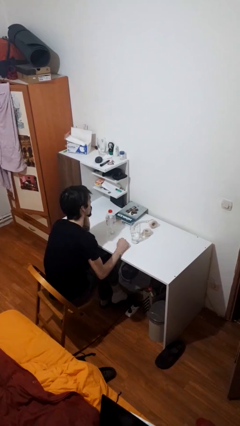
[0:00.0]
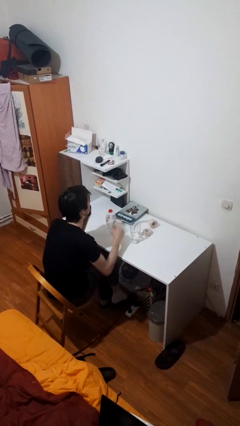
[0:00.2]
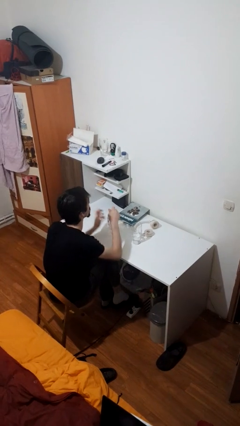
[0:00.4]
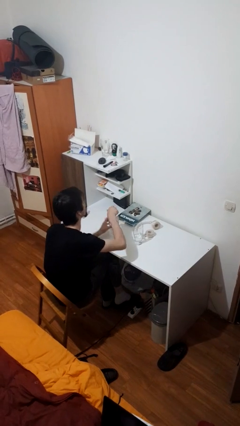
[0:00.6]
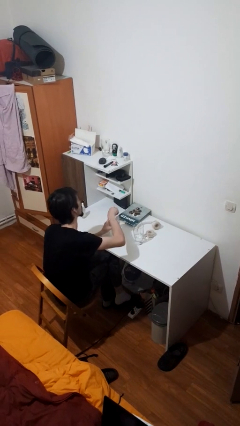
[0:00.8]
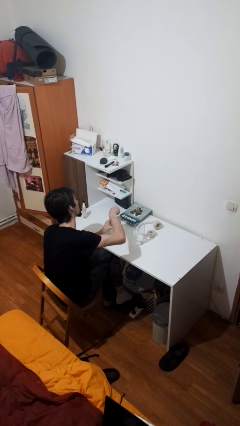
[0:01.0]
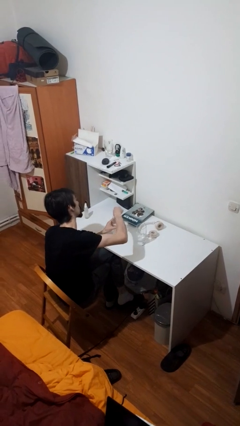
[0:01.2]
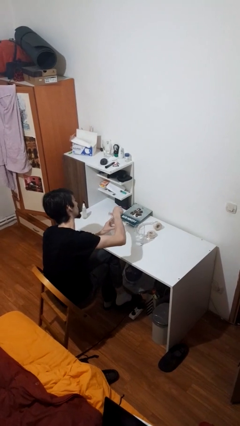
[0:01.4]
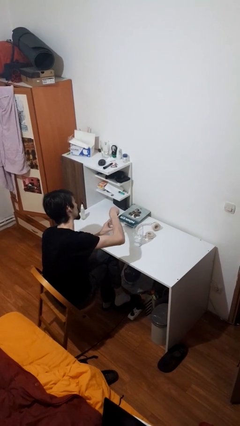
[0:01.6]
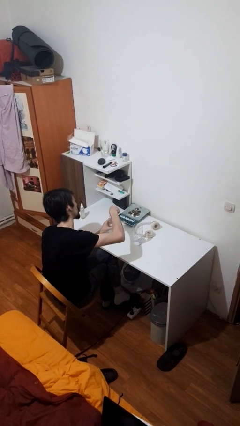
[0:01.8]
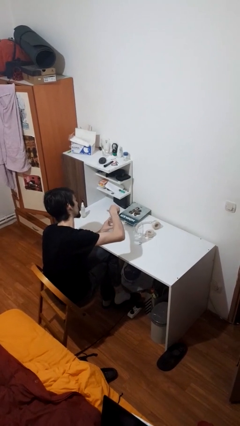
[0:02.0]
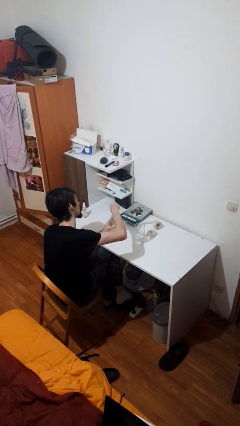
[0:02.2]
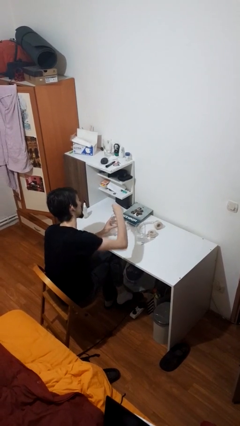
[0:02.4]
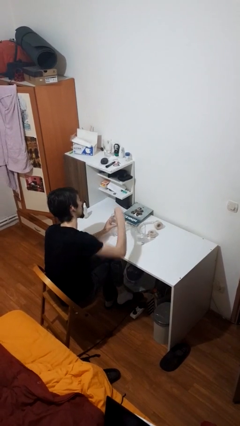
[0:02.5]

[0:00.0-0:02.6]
person unscrews lid from bottle

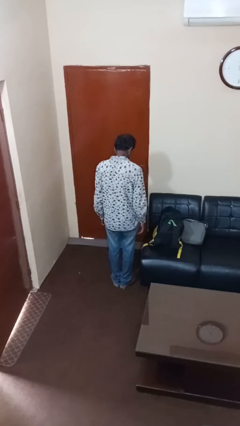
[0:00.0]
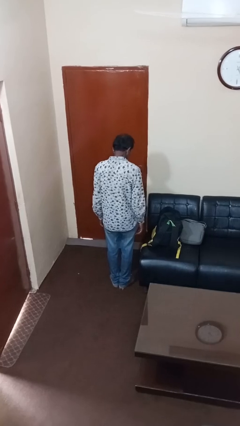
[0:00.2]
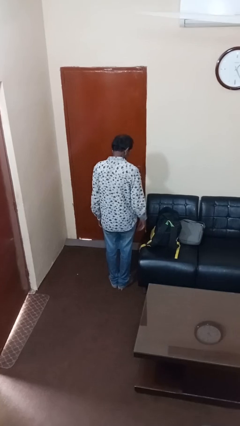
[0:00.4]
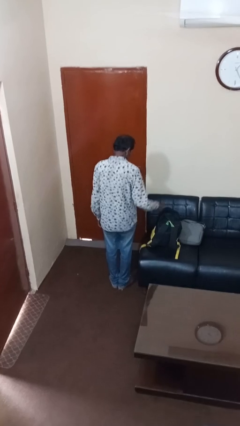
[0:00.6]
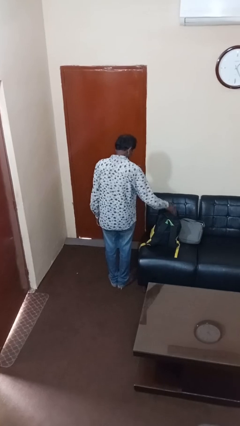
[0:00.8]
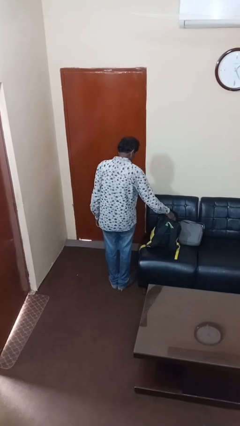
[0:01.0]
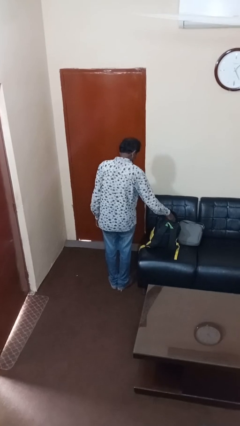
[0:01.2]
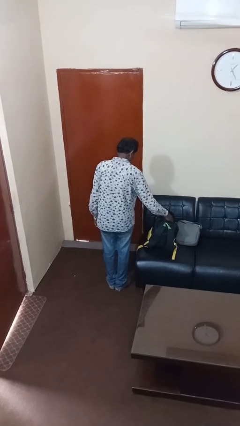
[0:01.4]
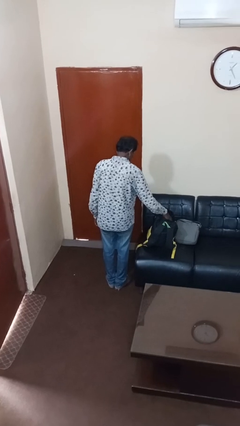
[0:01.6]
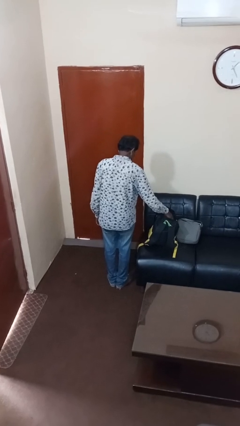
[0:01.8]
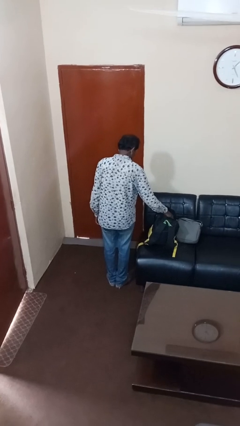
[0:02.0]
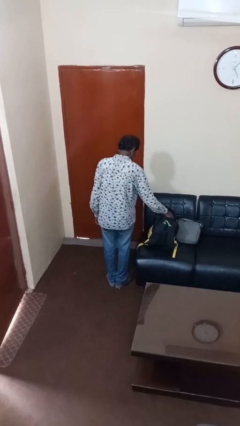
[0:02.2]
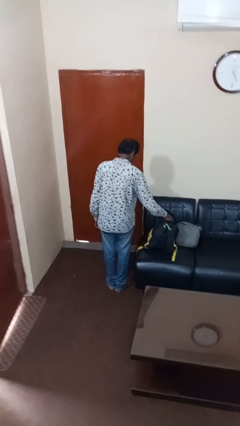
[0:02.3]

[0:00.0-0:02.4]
person searches in backpack

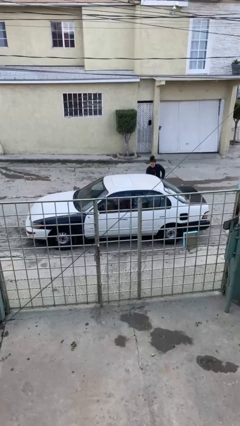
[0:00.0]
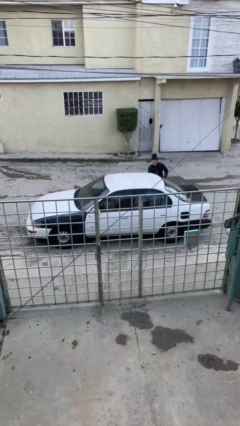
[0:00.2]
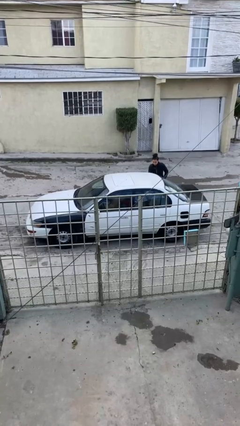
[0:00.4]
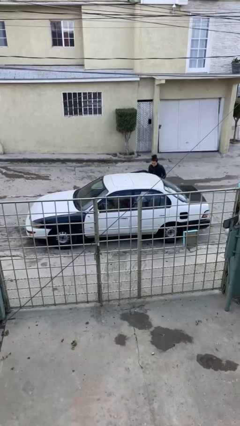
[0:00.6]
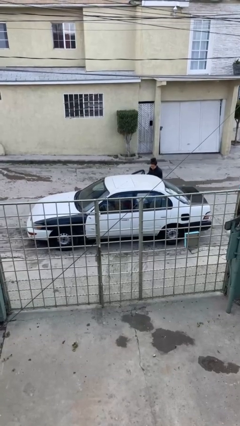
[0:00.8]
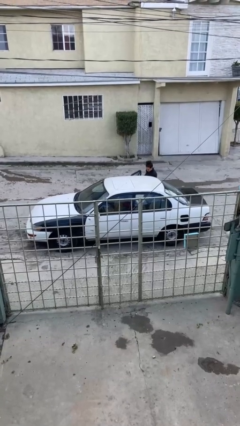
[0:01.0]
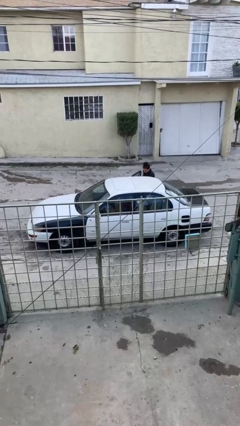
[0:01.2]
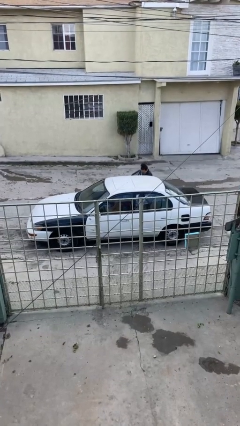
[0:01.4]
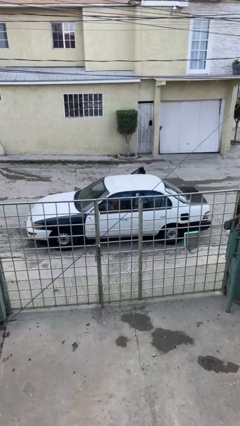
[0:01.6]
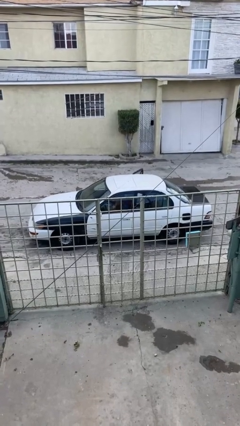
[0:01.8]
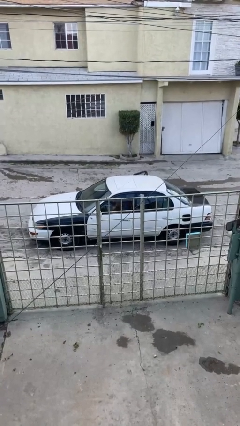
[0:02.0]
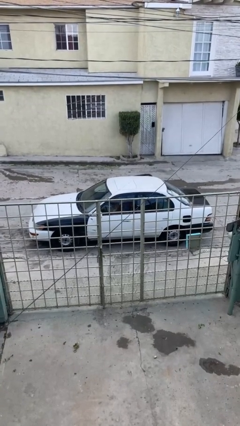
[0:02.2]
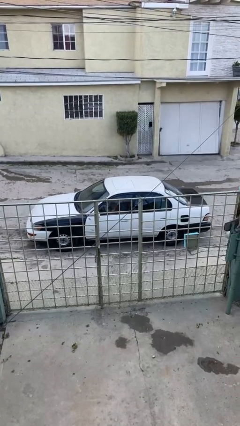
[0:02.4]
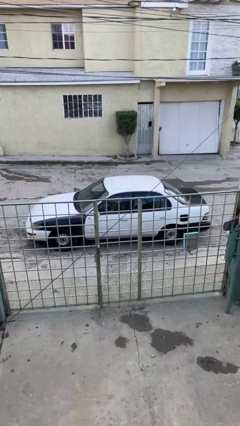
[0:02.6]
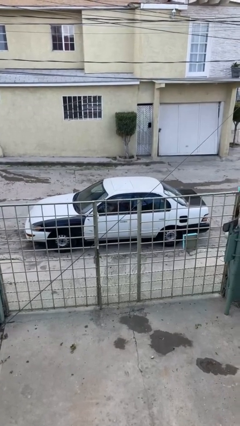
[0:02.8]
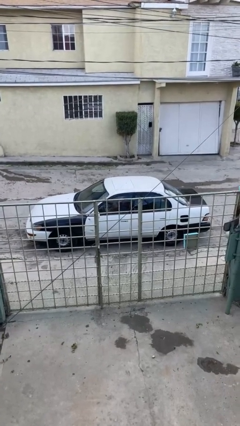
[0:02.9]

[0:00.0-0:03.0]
car picks up person

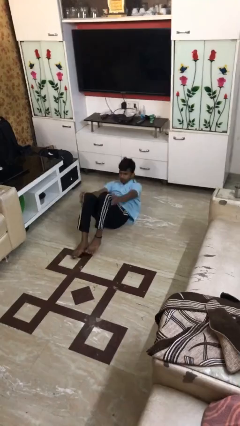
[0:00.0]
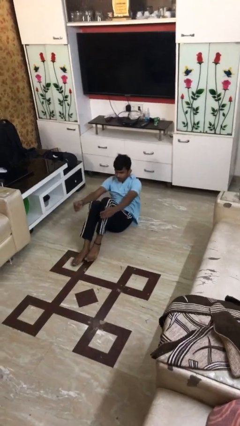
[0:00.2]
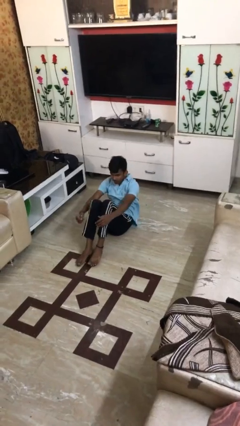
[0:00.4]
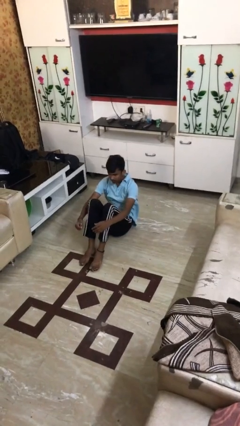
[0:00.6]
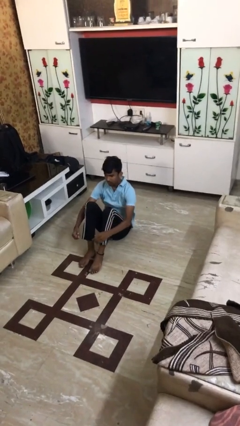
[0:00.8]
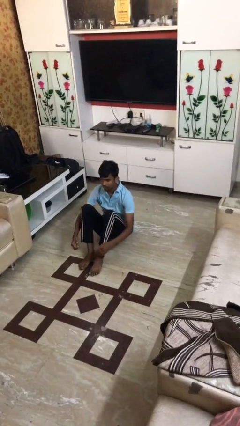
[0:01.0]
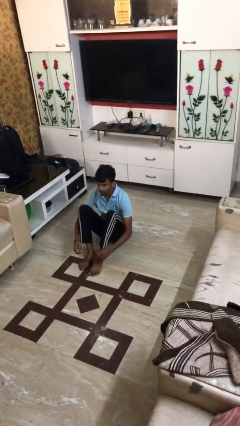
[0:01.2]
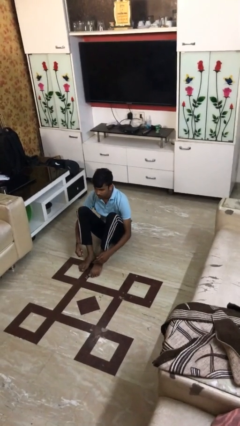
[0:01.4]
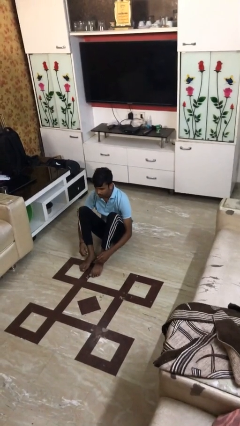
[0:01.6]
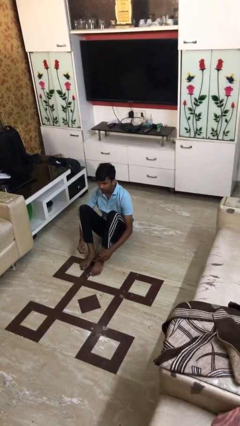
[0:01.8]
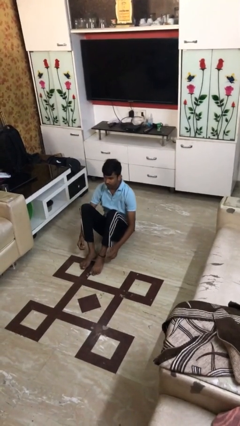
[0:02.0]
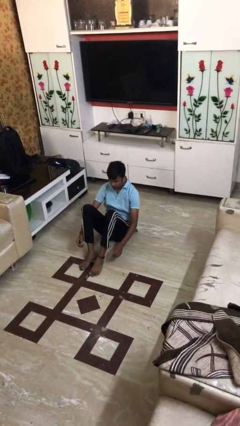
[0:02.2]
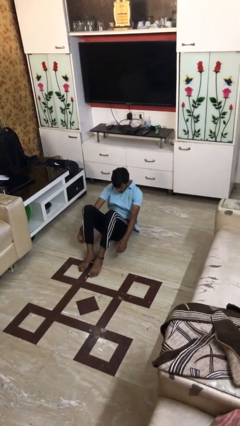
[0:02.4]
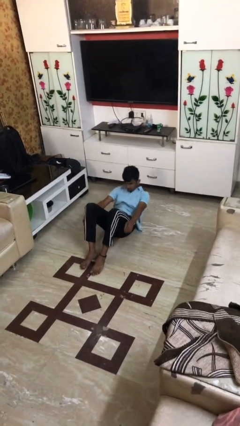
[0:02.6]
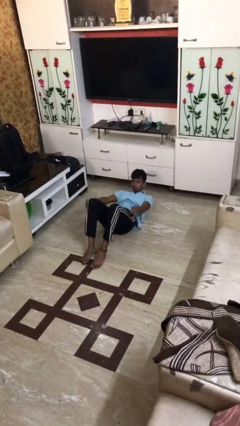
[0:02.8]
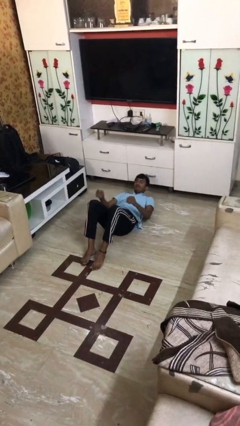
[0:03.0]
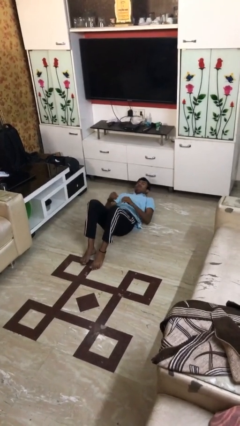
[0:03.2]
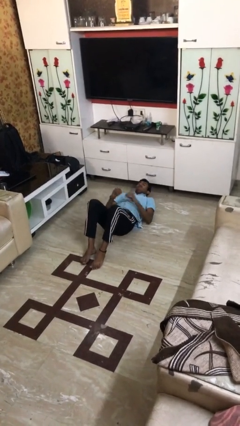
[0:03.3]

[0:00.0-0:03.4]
person exercises with situp

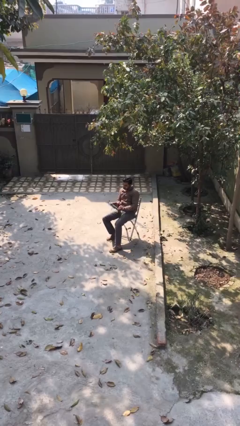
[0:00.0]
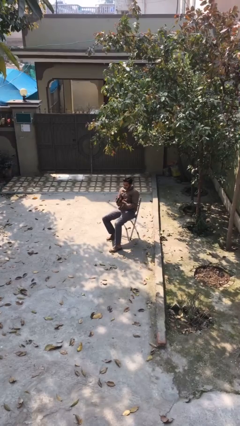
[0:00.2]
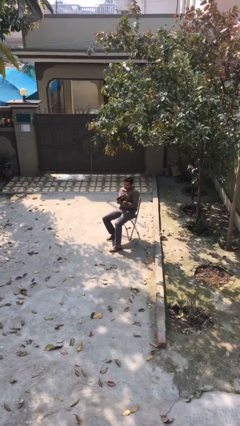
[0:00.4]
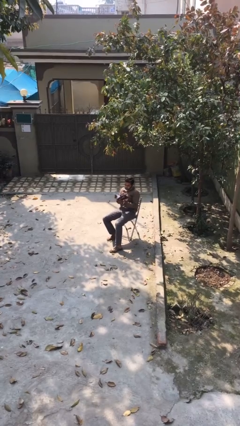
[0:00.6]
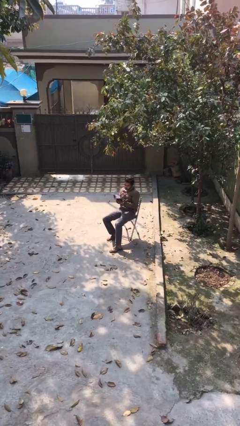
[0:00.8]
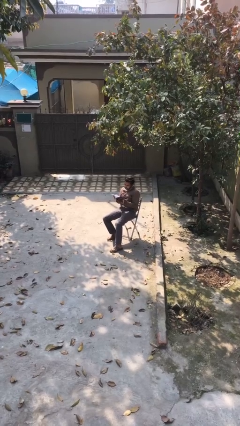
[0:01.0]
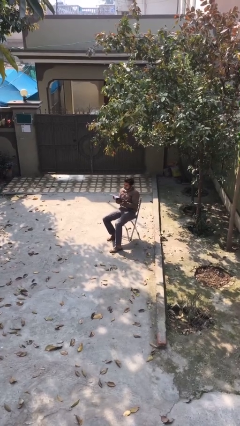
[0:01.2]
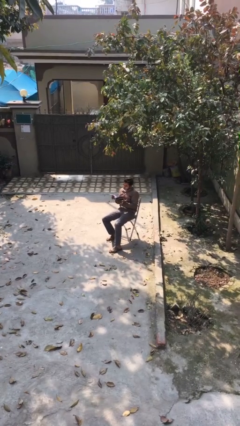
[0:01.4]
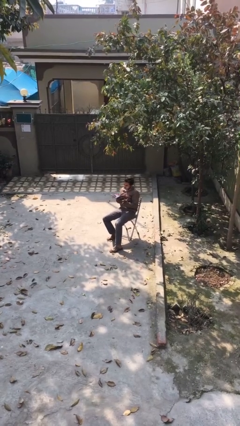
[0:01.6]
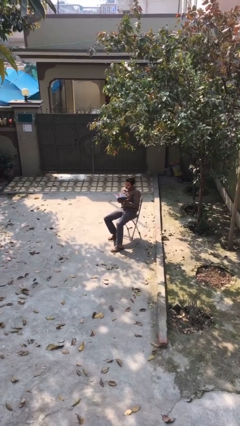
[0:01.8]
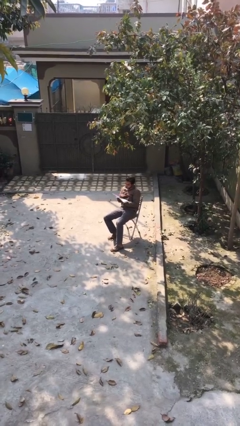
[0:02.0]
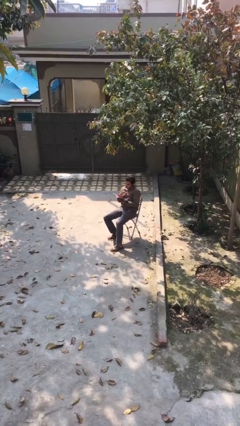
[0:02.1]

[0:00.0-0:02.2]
person reads document

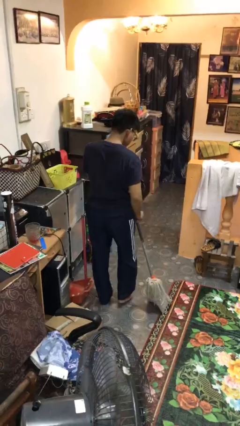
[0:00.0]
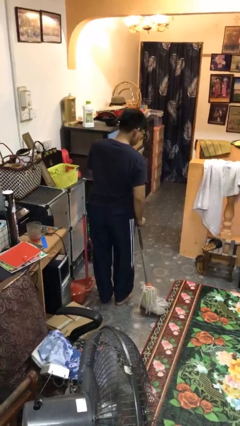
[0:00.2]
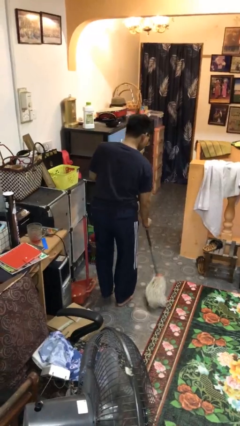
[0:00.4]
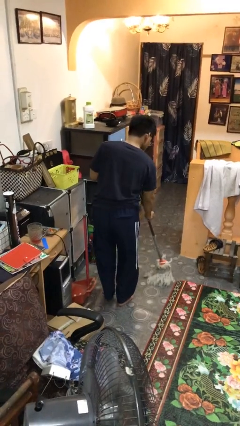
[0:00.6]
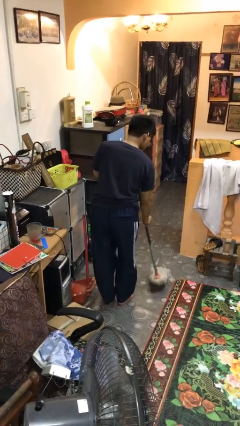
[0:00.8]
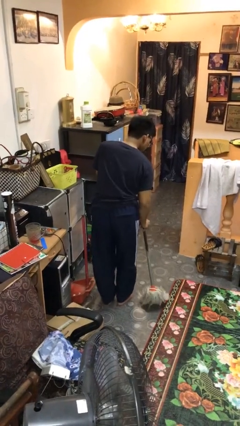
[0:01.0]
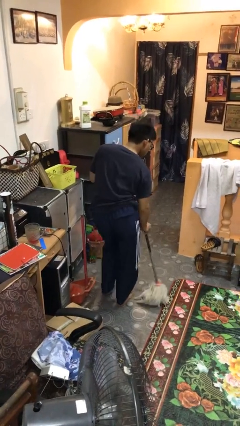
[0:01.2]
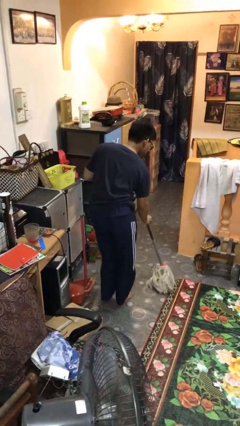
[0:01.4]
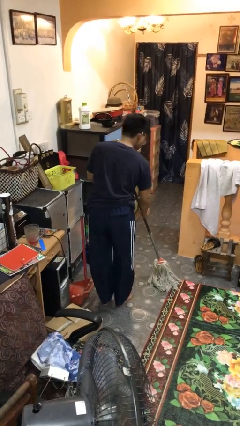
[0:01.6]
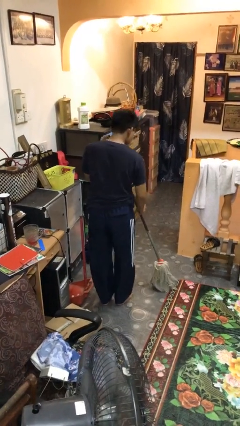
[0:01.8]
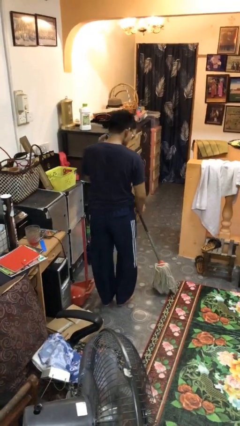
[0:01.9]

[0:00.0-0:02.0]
person mops

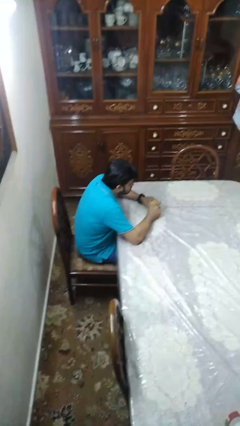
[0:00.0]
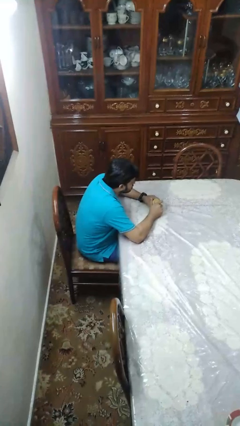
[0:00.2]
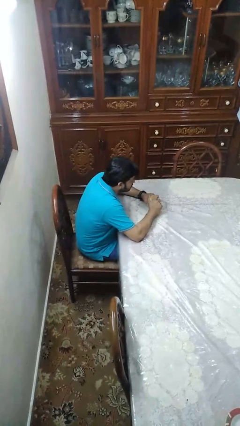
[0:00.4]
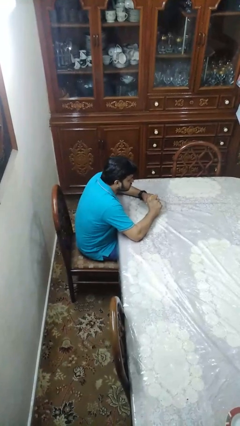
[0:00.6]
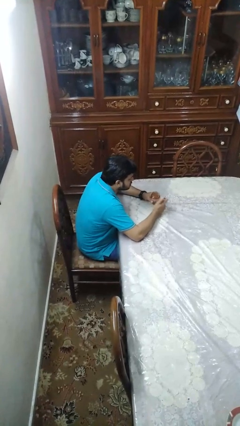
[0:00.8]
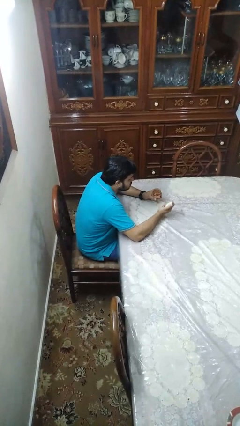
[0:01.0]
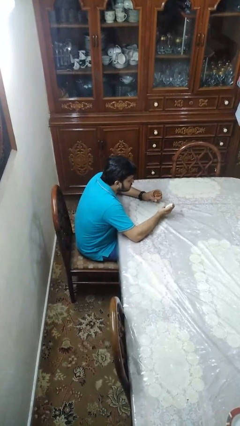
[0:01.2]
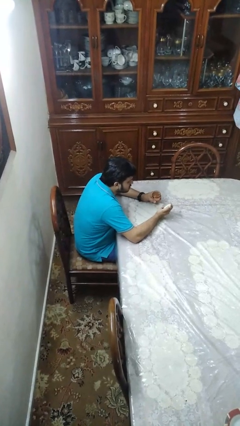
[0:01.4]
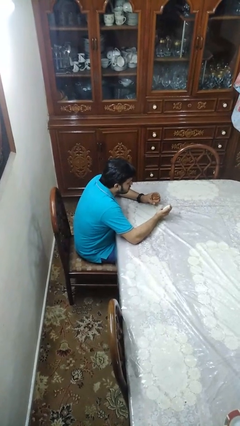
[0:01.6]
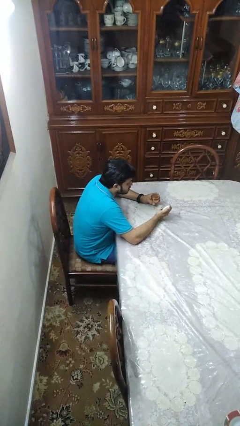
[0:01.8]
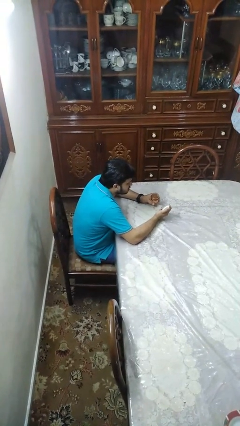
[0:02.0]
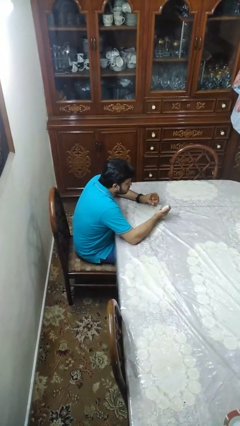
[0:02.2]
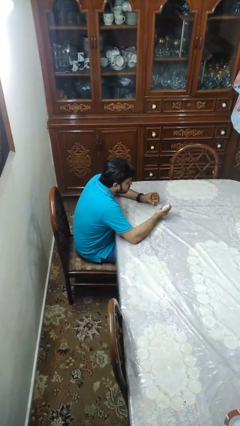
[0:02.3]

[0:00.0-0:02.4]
person opens jar
